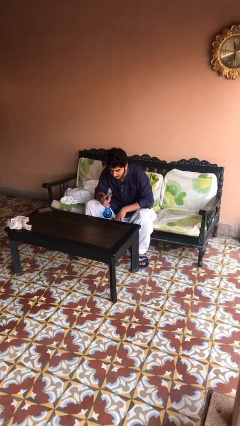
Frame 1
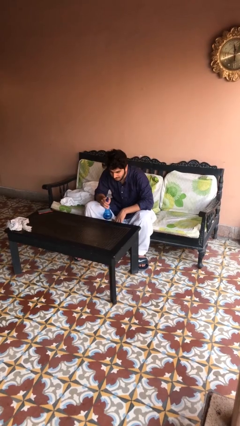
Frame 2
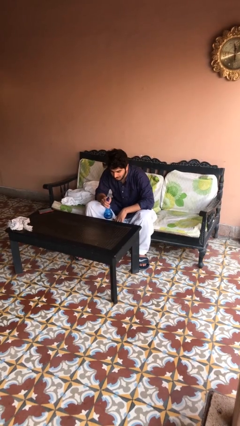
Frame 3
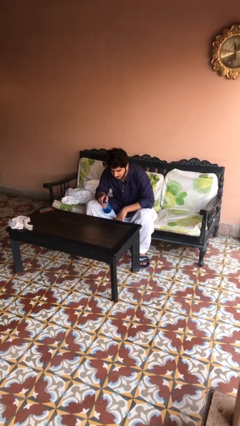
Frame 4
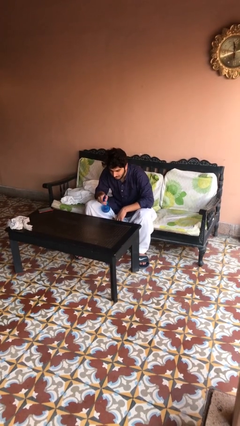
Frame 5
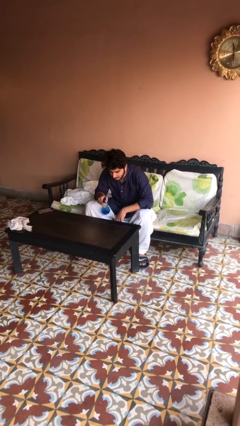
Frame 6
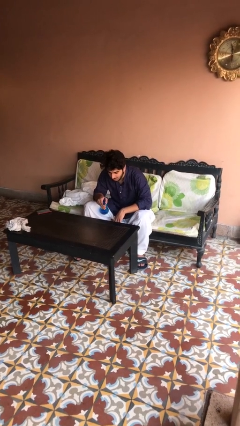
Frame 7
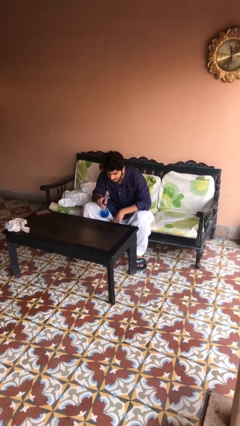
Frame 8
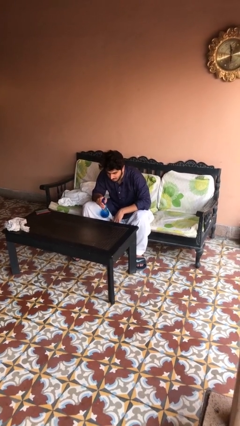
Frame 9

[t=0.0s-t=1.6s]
person sprays from bottle

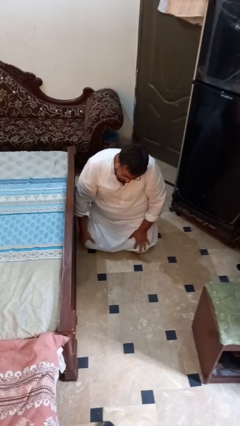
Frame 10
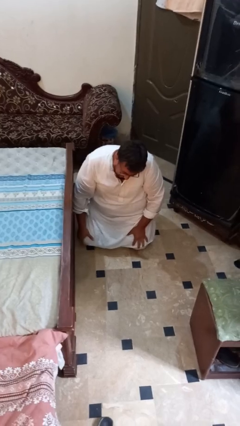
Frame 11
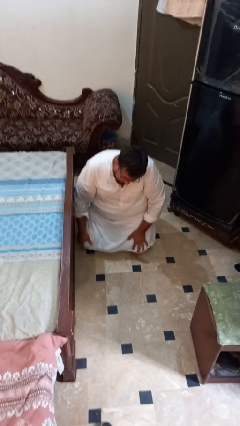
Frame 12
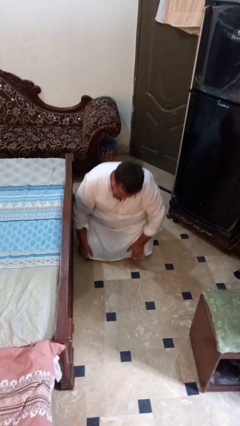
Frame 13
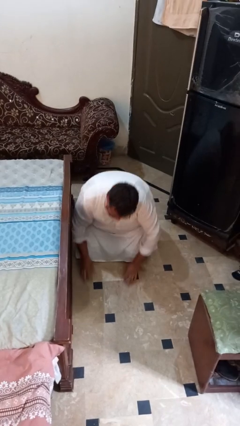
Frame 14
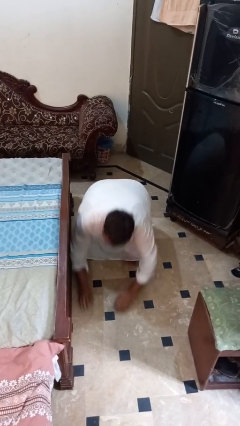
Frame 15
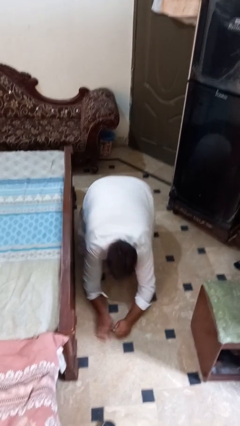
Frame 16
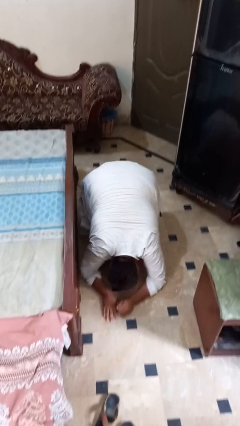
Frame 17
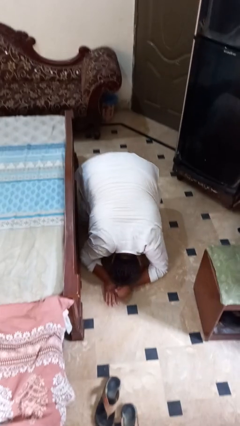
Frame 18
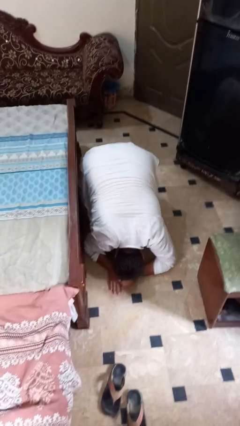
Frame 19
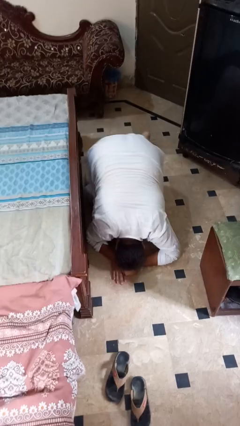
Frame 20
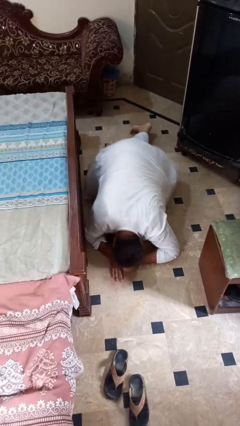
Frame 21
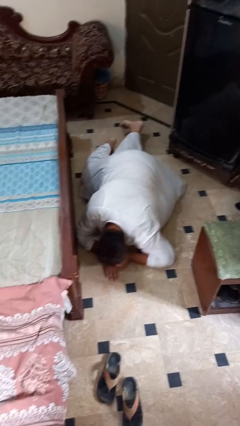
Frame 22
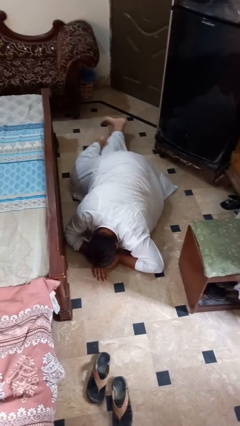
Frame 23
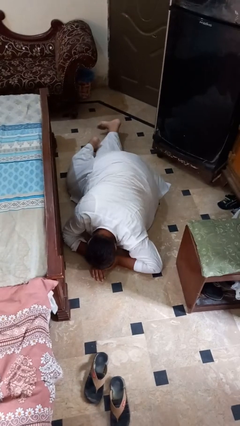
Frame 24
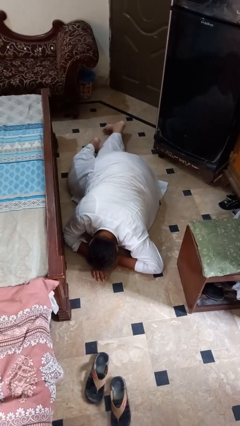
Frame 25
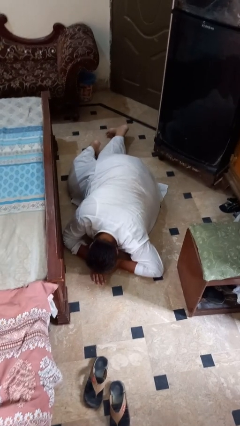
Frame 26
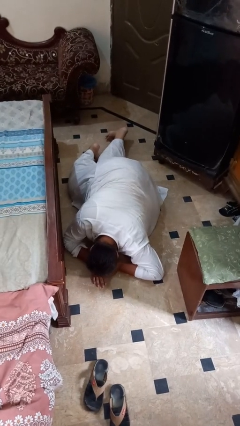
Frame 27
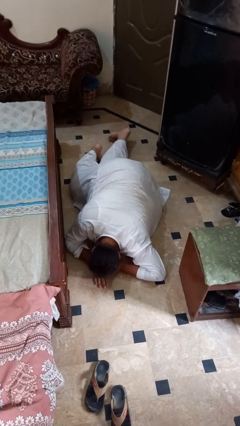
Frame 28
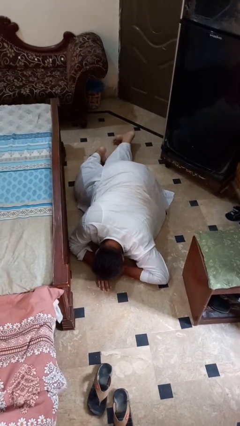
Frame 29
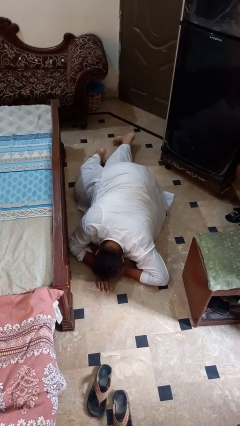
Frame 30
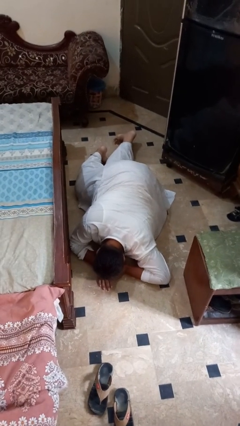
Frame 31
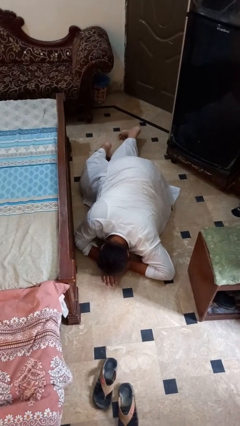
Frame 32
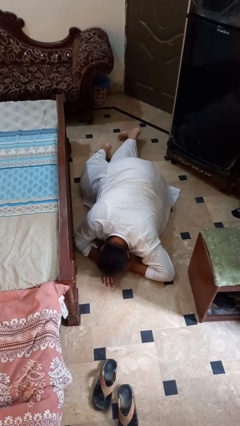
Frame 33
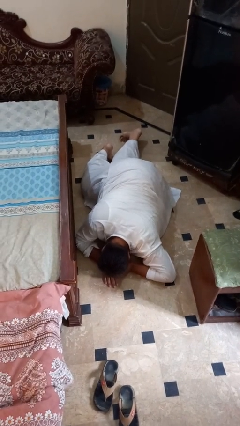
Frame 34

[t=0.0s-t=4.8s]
person lies down on floor

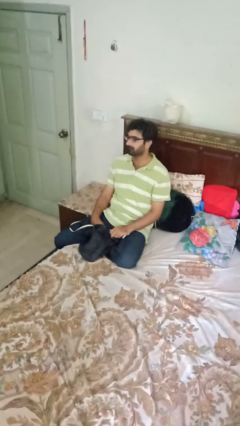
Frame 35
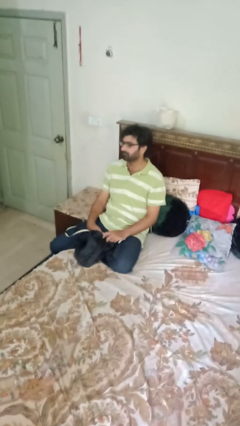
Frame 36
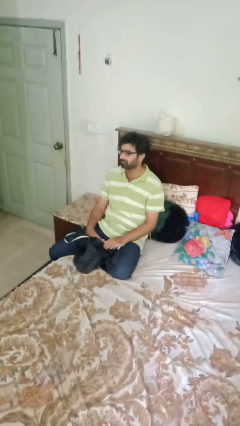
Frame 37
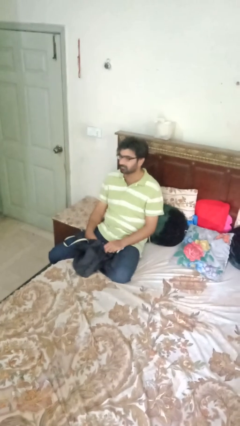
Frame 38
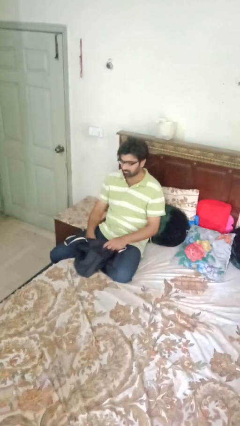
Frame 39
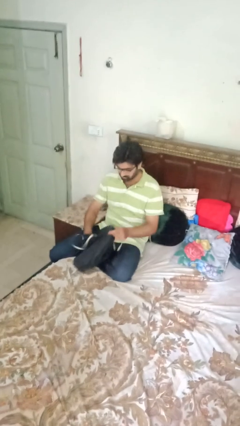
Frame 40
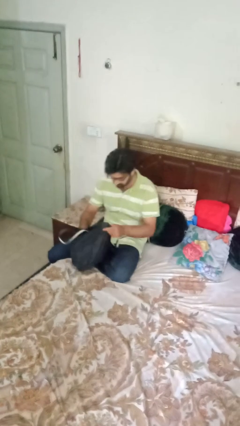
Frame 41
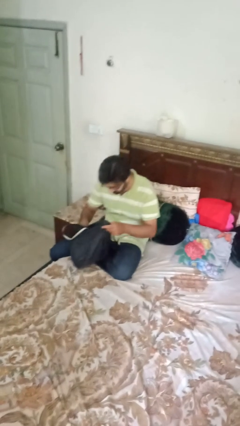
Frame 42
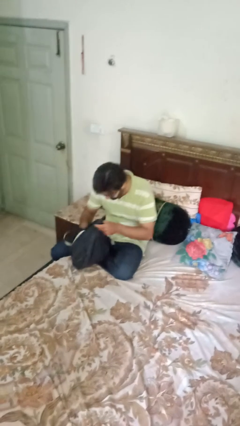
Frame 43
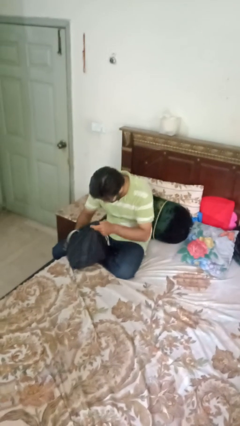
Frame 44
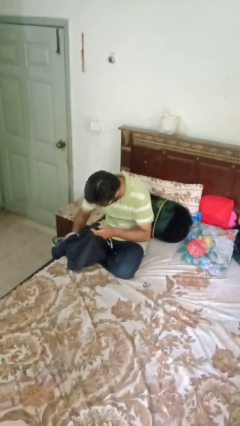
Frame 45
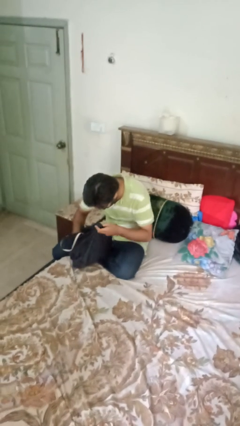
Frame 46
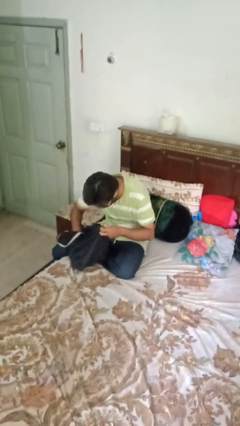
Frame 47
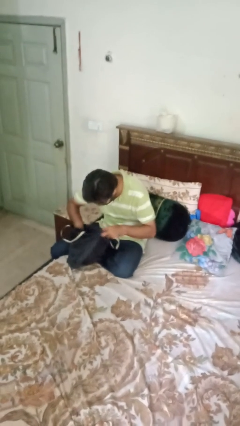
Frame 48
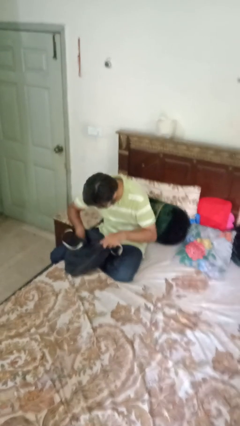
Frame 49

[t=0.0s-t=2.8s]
person searches in bag

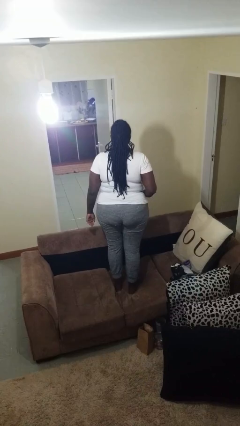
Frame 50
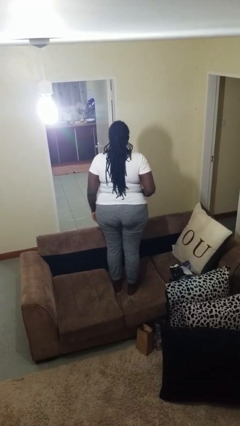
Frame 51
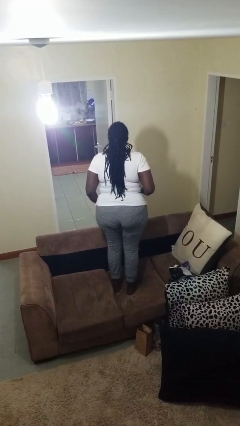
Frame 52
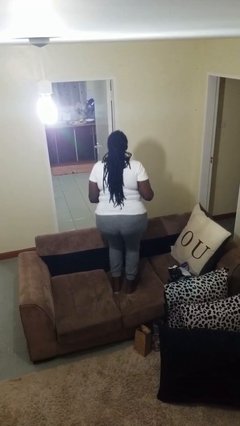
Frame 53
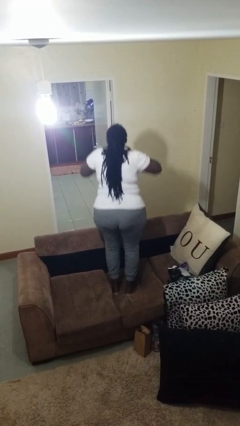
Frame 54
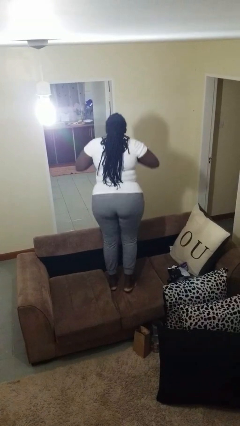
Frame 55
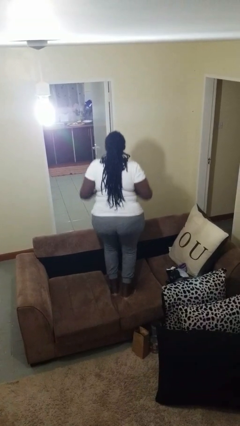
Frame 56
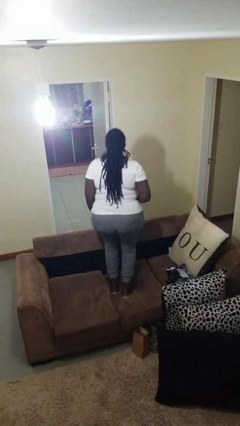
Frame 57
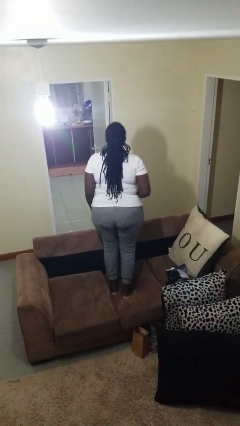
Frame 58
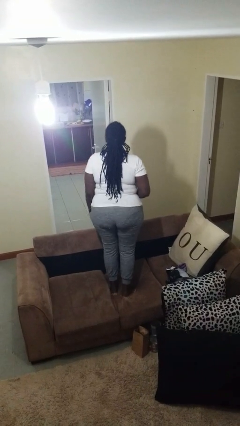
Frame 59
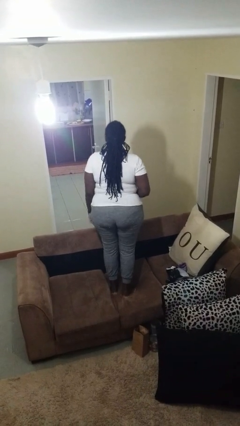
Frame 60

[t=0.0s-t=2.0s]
person jumps on couch

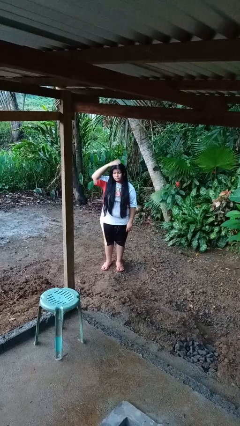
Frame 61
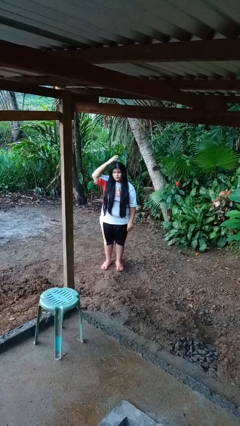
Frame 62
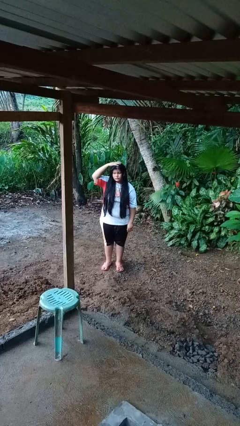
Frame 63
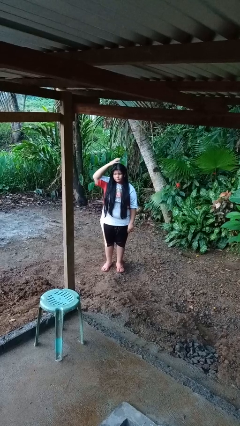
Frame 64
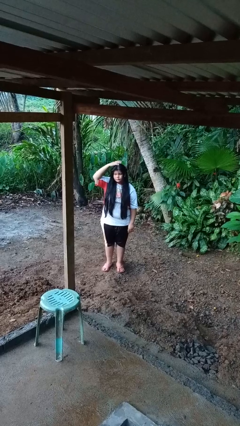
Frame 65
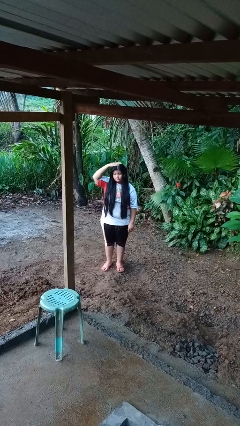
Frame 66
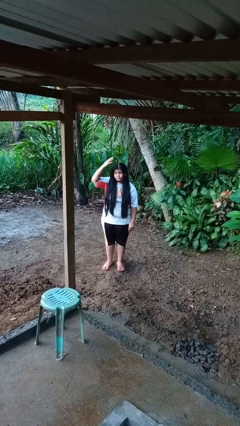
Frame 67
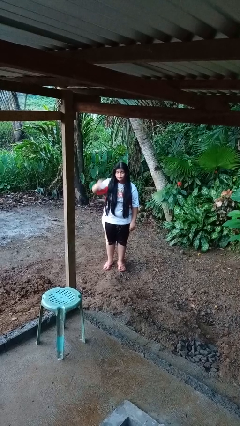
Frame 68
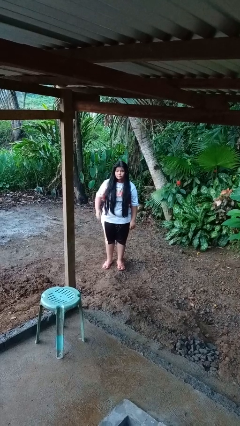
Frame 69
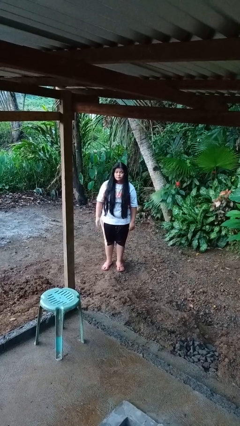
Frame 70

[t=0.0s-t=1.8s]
person pats head

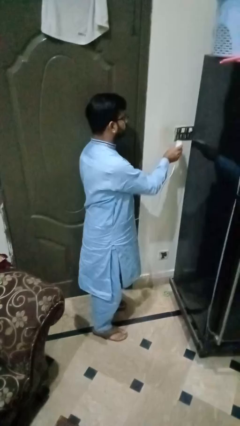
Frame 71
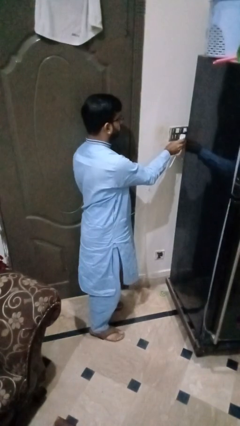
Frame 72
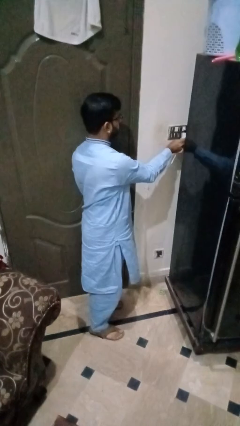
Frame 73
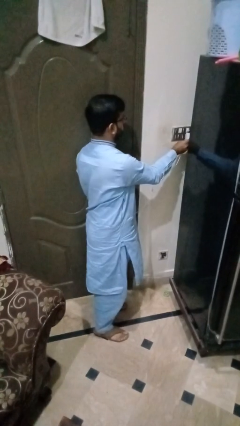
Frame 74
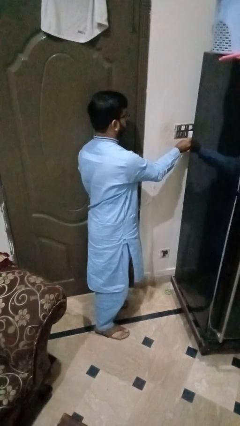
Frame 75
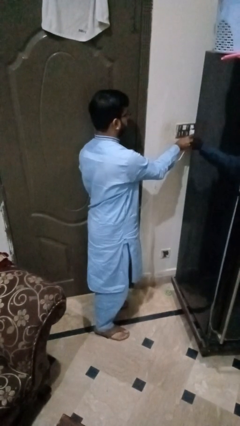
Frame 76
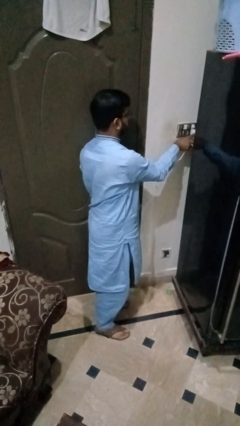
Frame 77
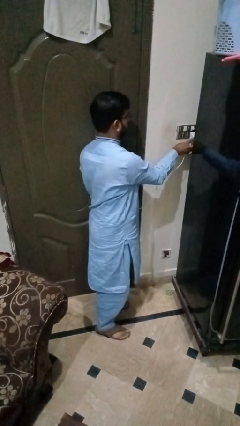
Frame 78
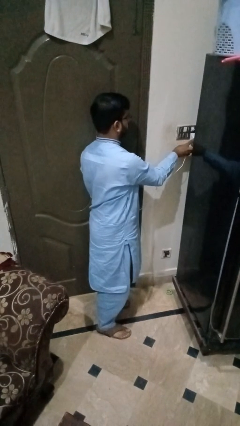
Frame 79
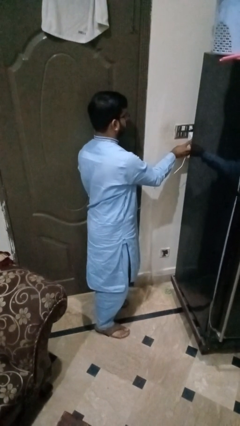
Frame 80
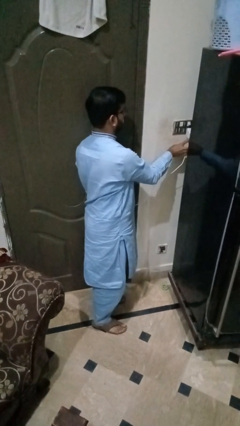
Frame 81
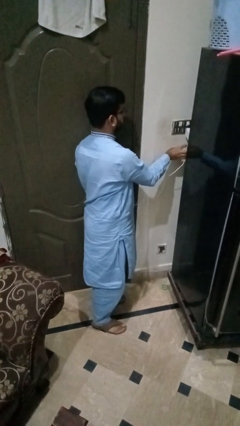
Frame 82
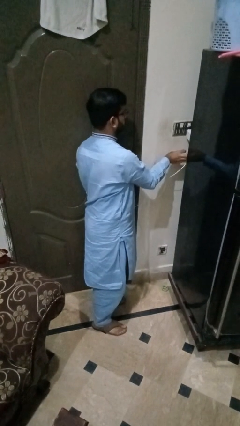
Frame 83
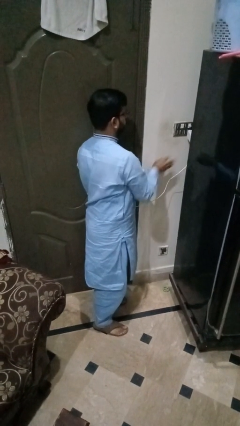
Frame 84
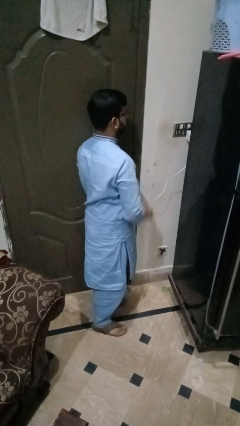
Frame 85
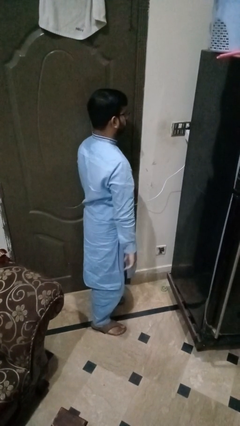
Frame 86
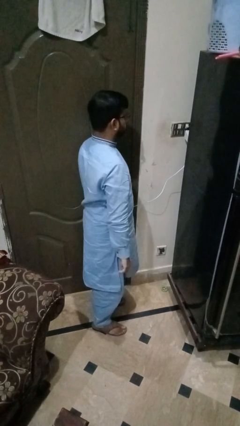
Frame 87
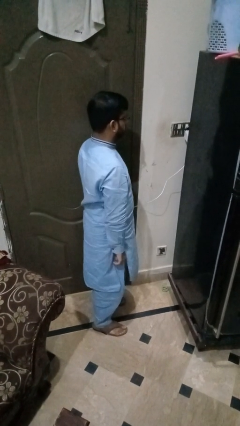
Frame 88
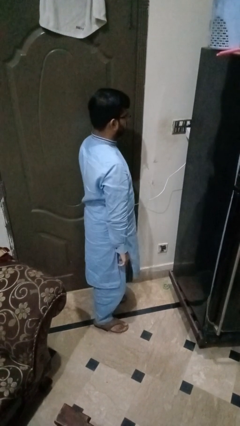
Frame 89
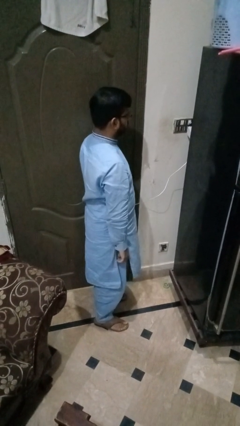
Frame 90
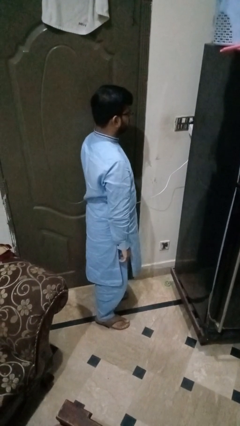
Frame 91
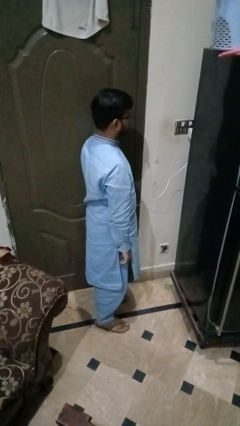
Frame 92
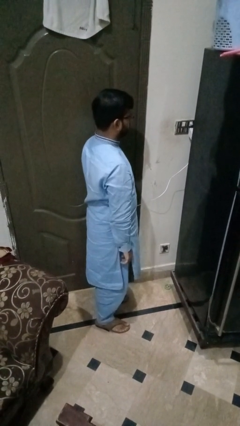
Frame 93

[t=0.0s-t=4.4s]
person plugs into electrical socket
